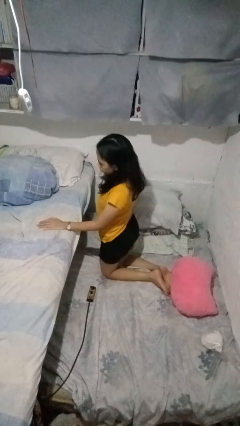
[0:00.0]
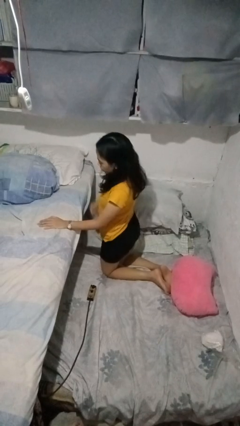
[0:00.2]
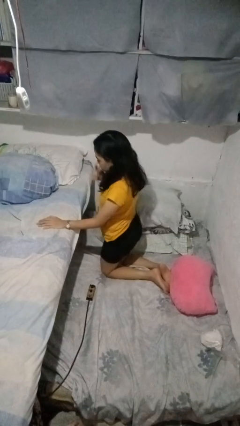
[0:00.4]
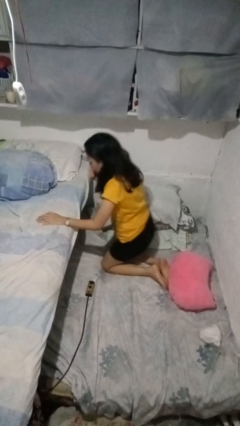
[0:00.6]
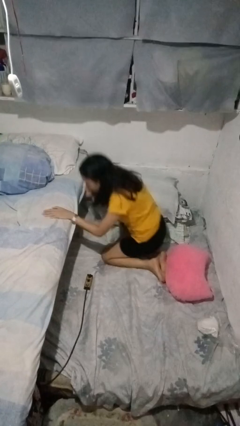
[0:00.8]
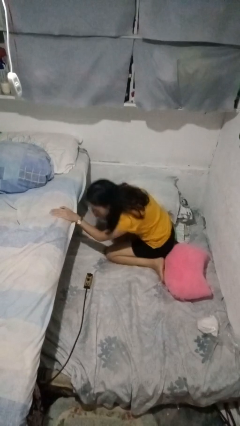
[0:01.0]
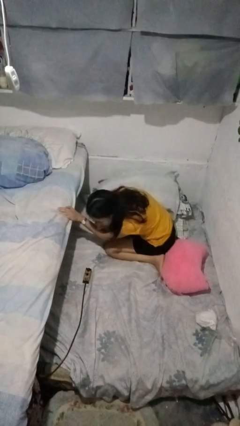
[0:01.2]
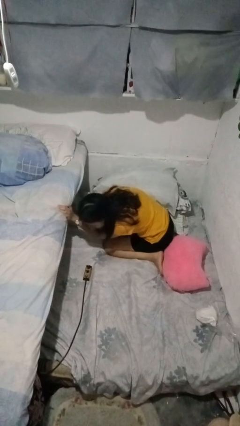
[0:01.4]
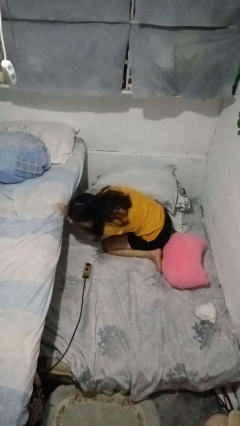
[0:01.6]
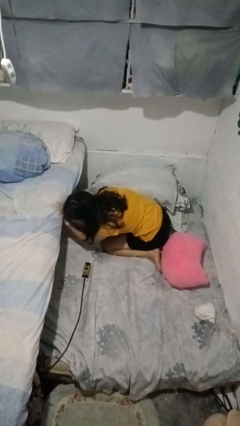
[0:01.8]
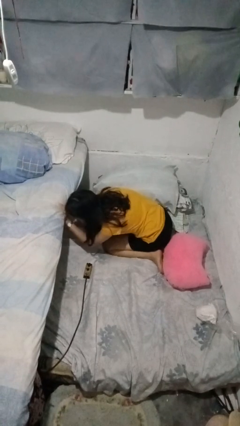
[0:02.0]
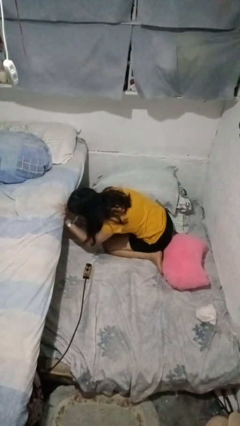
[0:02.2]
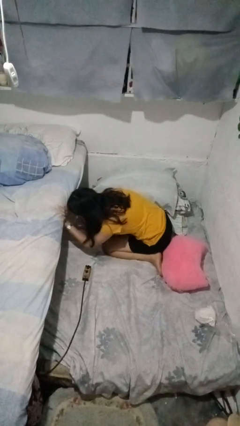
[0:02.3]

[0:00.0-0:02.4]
person searches under bed

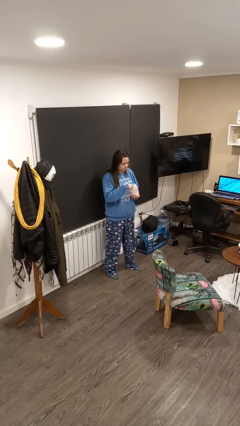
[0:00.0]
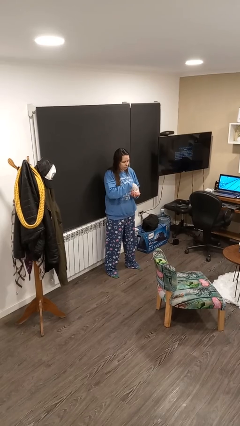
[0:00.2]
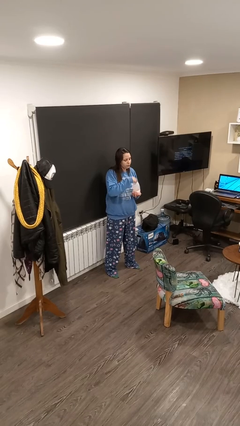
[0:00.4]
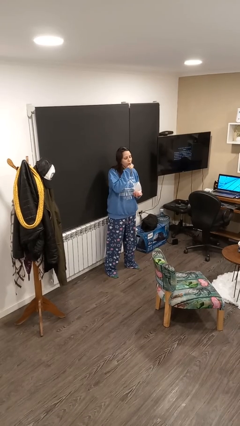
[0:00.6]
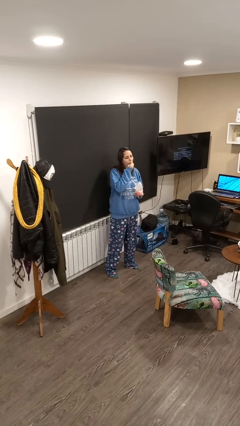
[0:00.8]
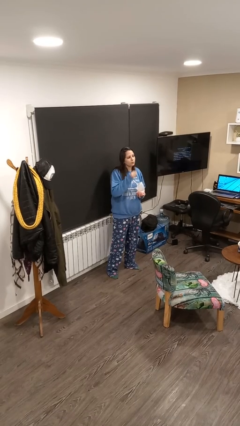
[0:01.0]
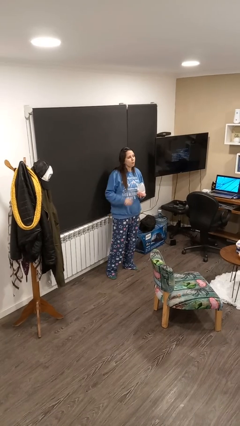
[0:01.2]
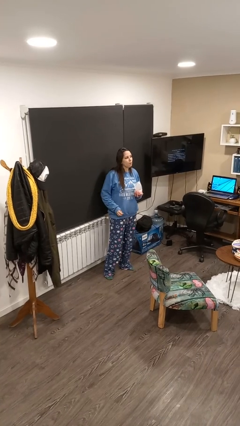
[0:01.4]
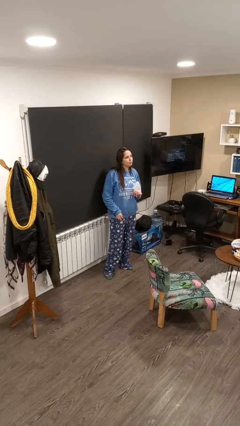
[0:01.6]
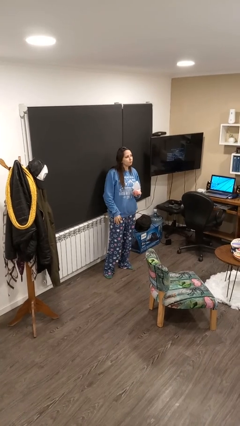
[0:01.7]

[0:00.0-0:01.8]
person eats snack from bag

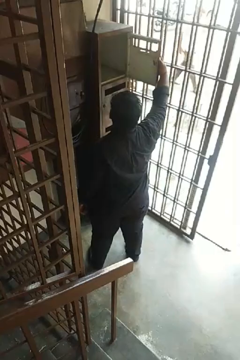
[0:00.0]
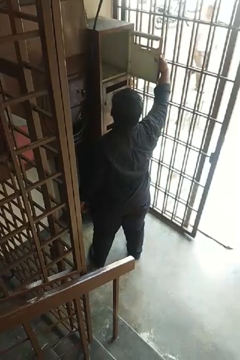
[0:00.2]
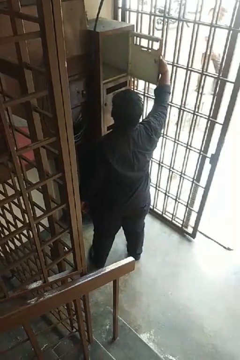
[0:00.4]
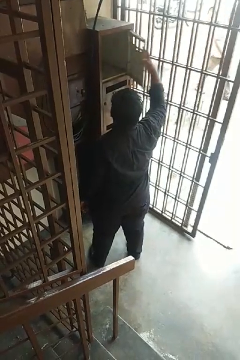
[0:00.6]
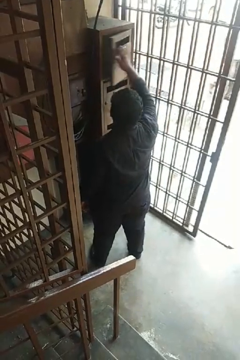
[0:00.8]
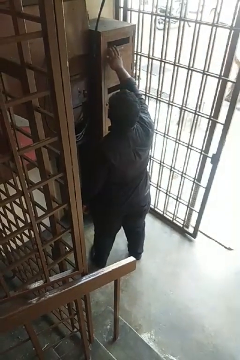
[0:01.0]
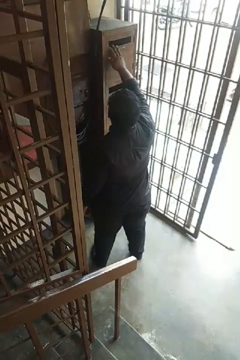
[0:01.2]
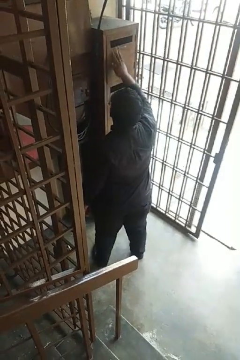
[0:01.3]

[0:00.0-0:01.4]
person closes mailbox

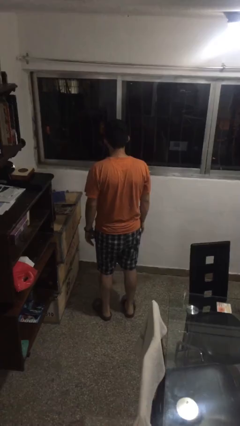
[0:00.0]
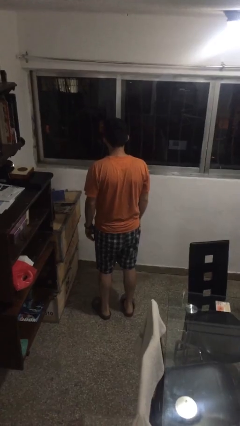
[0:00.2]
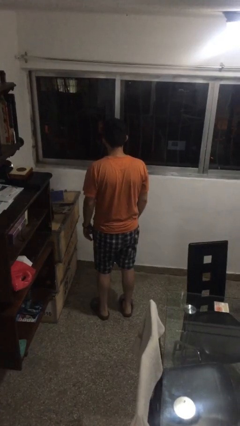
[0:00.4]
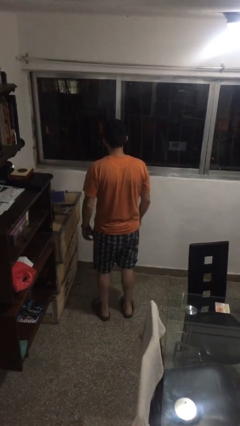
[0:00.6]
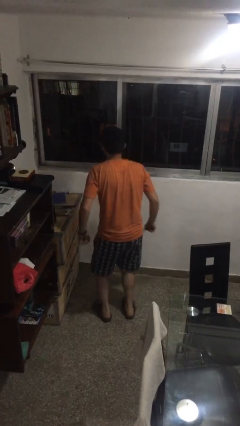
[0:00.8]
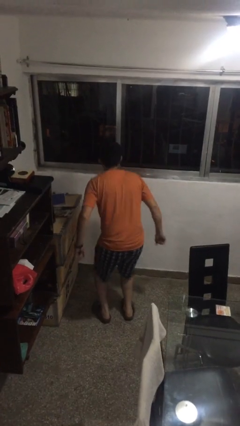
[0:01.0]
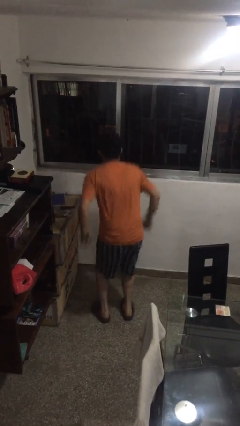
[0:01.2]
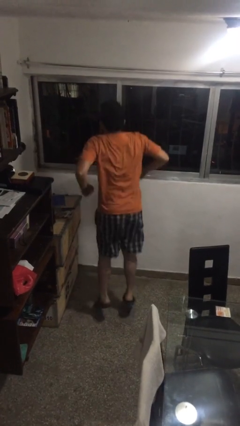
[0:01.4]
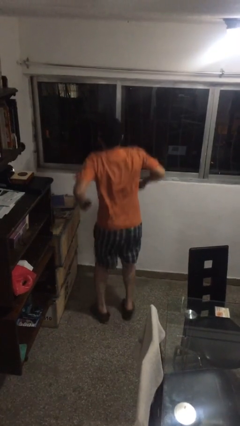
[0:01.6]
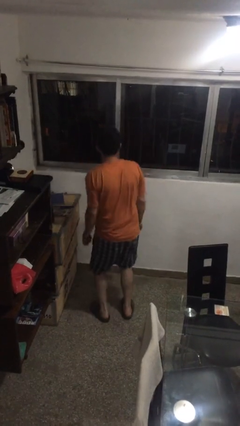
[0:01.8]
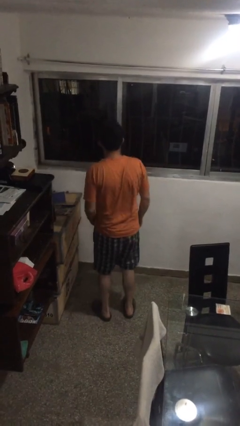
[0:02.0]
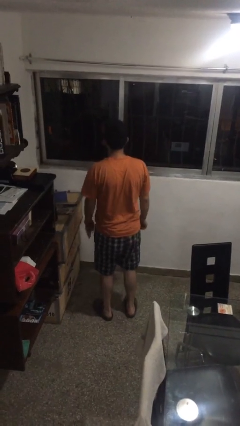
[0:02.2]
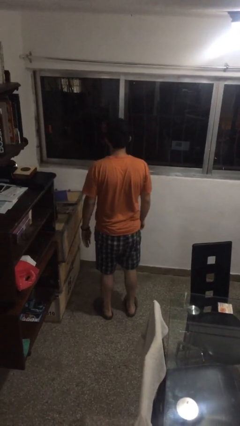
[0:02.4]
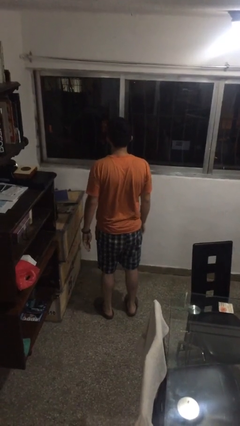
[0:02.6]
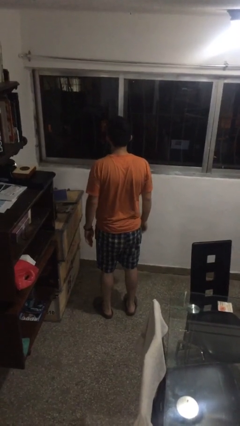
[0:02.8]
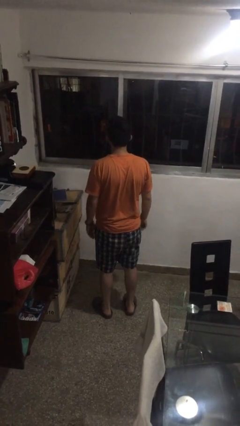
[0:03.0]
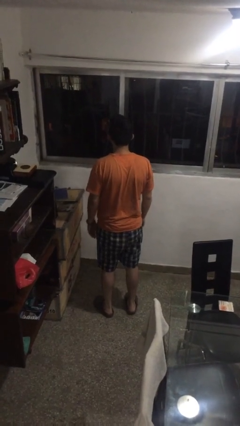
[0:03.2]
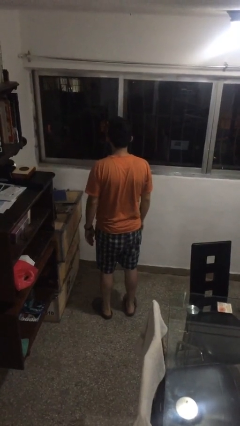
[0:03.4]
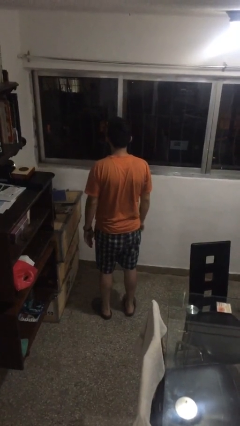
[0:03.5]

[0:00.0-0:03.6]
person jumps

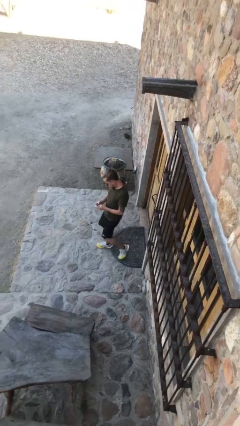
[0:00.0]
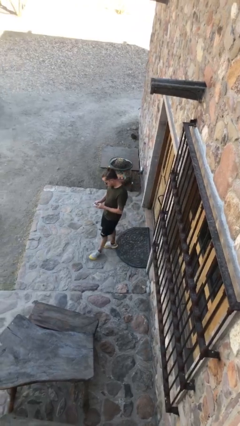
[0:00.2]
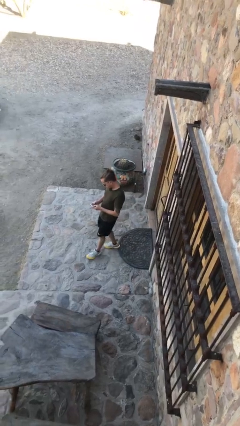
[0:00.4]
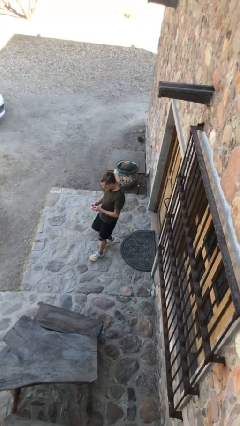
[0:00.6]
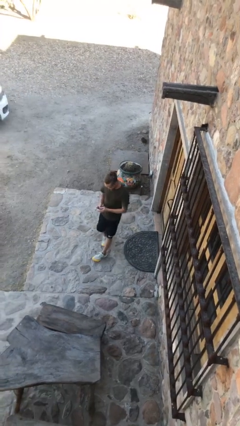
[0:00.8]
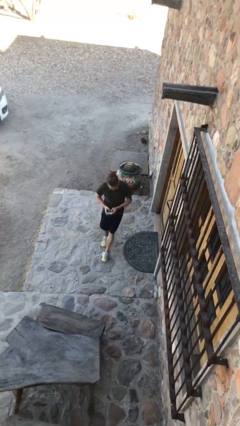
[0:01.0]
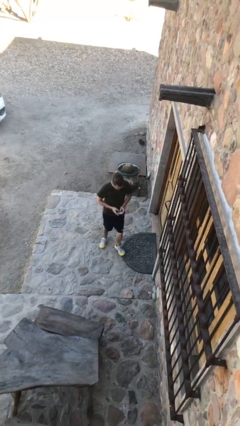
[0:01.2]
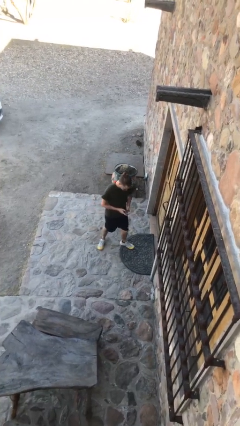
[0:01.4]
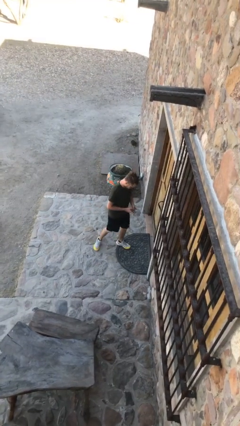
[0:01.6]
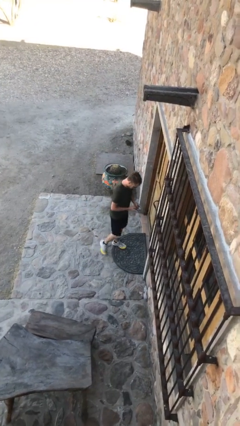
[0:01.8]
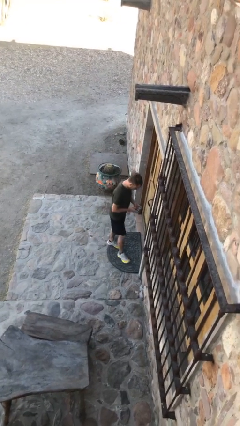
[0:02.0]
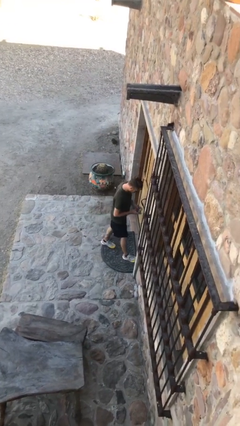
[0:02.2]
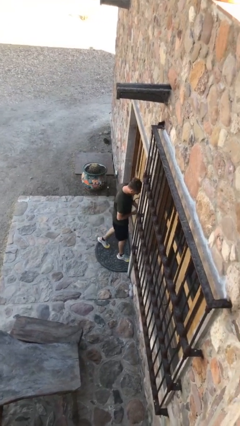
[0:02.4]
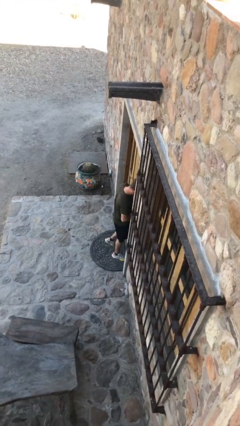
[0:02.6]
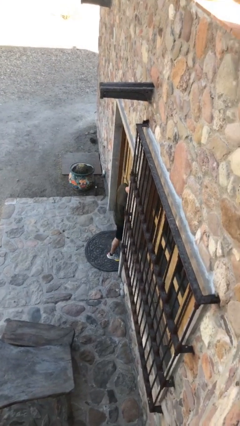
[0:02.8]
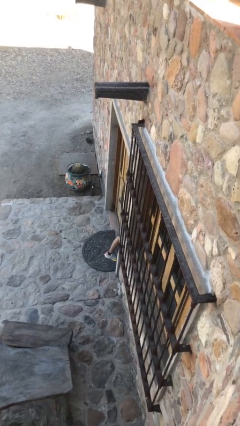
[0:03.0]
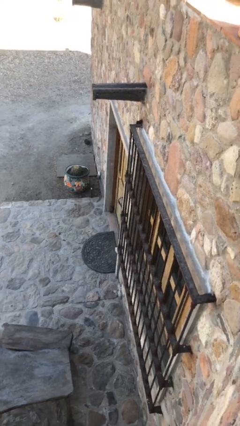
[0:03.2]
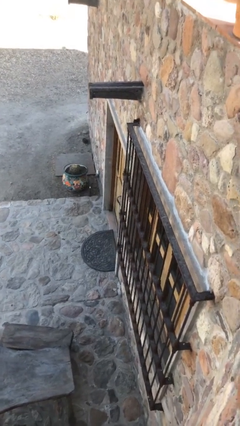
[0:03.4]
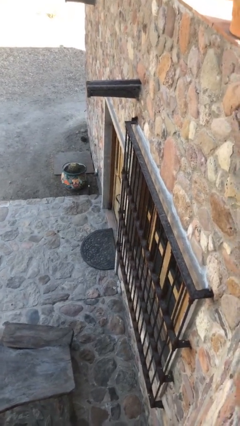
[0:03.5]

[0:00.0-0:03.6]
person exits scene through structure

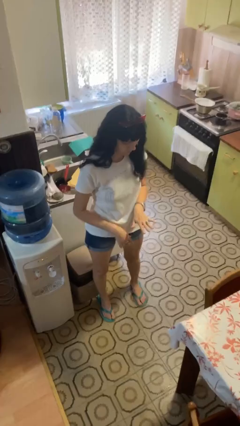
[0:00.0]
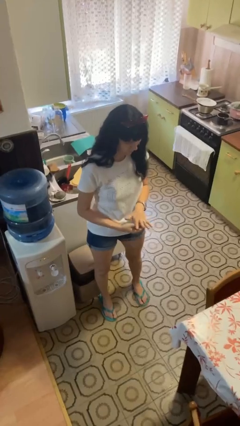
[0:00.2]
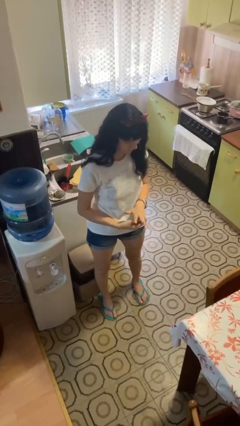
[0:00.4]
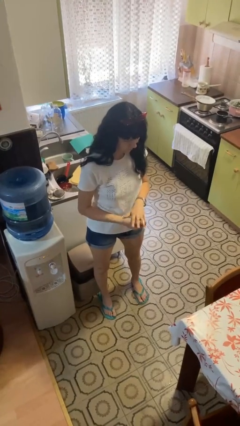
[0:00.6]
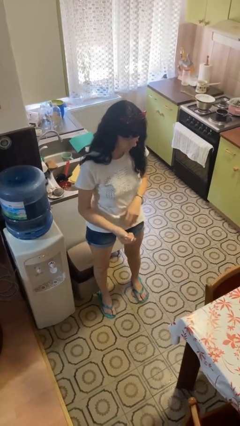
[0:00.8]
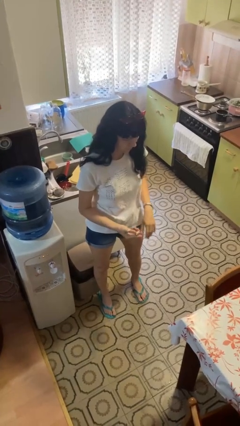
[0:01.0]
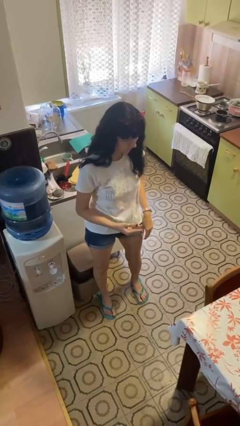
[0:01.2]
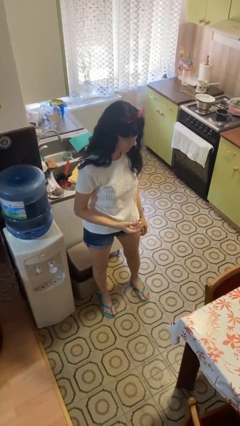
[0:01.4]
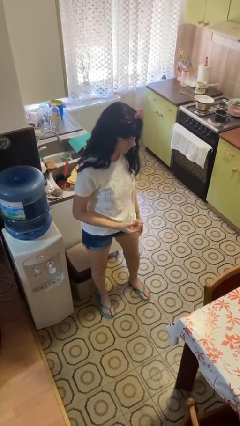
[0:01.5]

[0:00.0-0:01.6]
person takes off ring

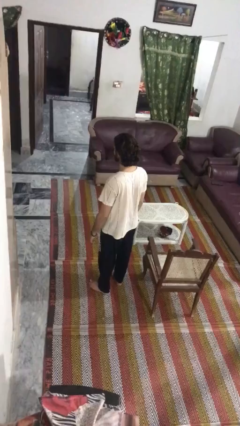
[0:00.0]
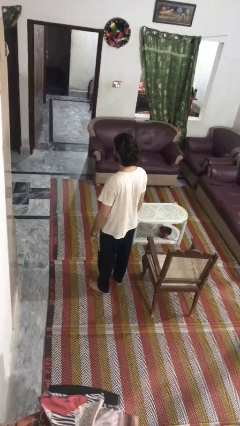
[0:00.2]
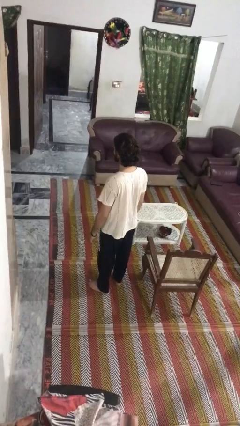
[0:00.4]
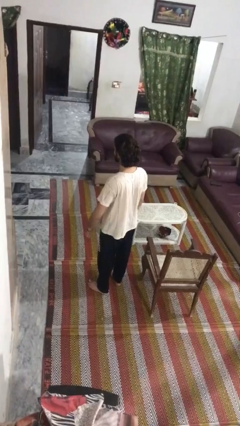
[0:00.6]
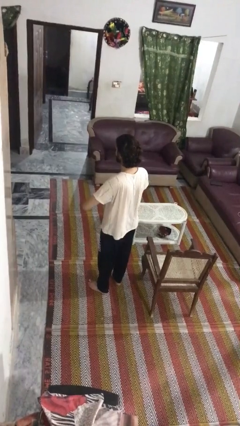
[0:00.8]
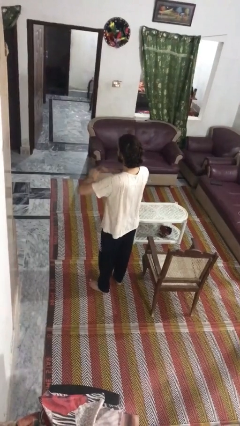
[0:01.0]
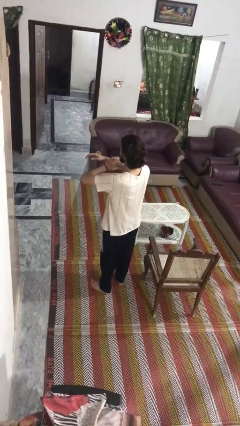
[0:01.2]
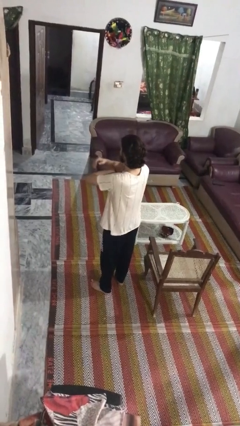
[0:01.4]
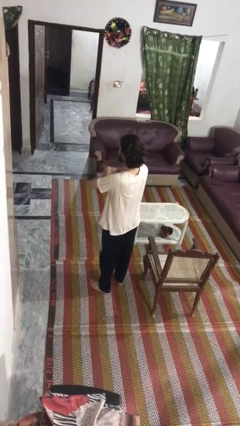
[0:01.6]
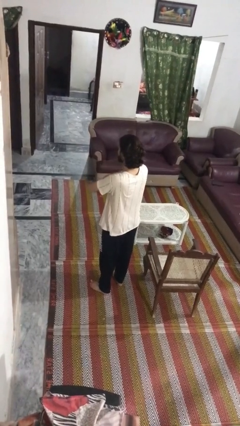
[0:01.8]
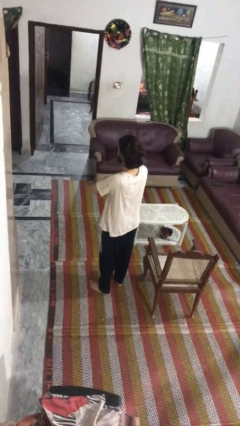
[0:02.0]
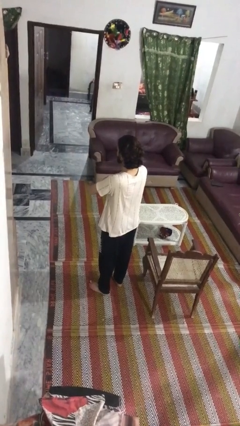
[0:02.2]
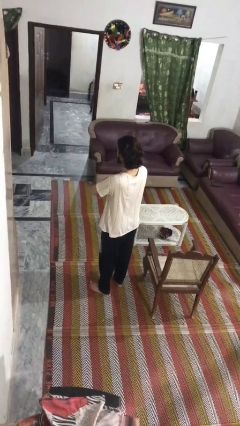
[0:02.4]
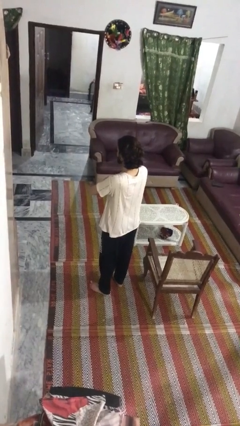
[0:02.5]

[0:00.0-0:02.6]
person crosses arms

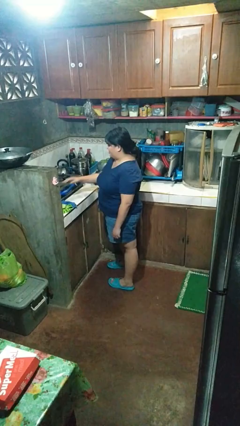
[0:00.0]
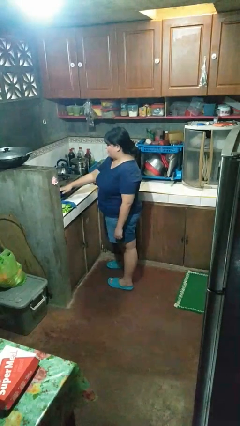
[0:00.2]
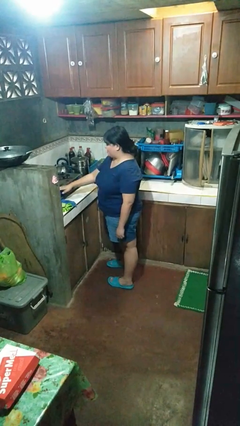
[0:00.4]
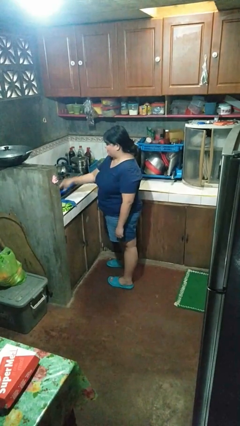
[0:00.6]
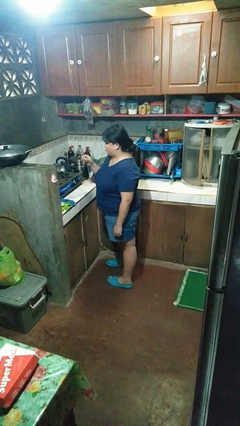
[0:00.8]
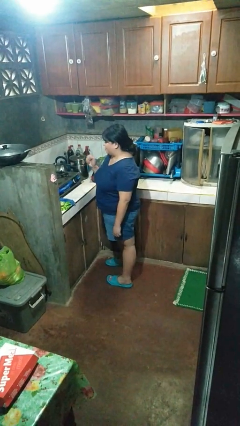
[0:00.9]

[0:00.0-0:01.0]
person burns hand
